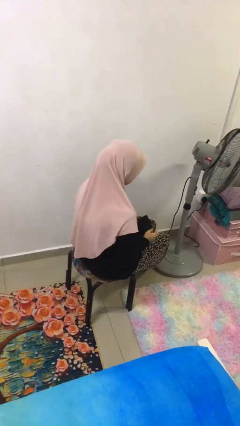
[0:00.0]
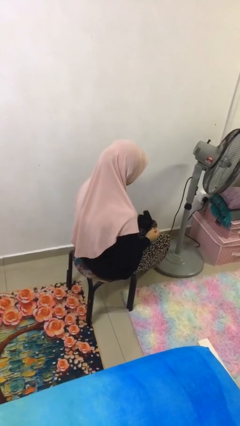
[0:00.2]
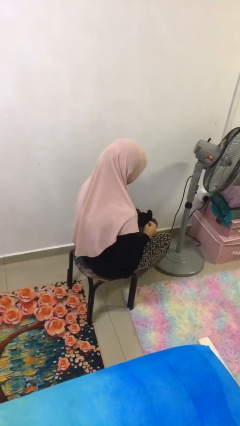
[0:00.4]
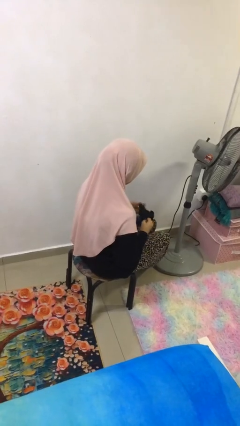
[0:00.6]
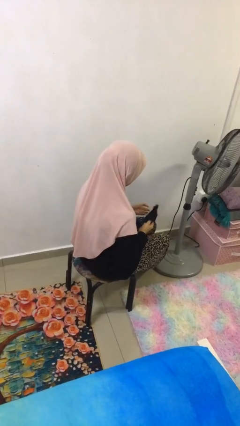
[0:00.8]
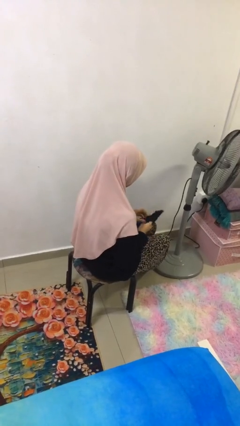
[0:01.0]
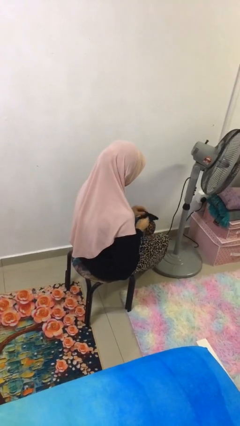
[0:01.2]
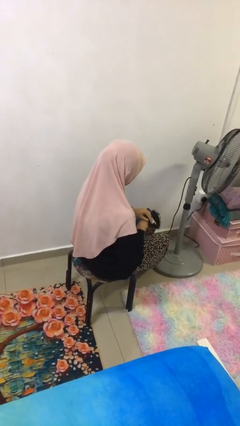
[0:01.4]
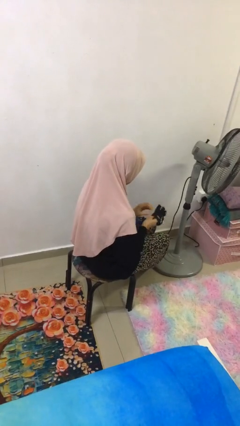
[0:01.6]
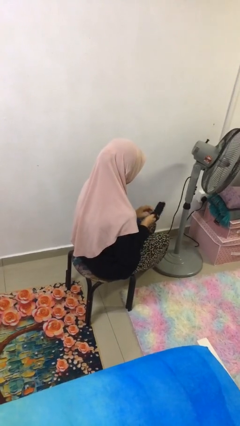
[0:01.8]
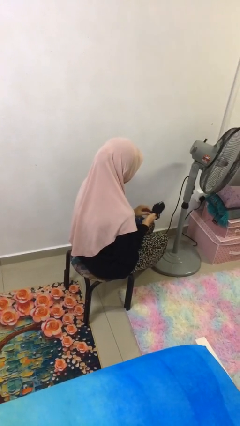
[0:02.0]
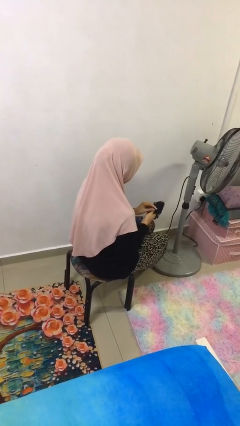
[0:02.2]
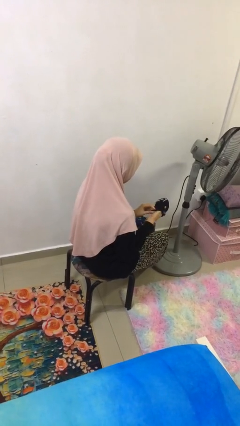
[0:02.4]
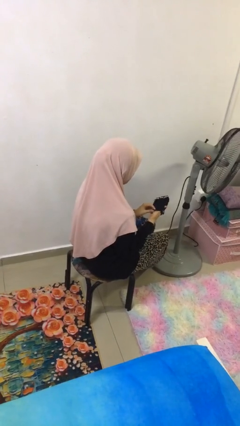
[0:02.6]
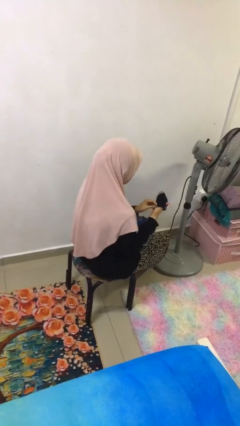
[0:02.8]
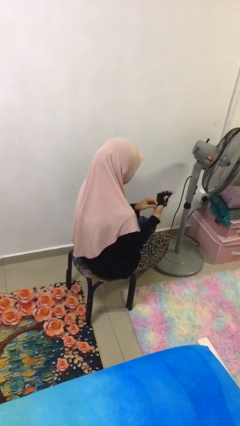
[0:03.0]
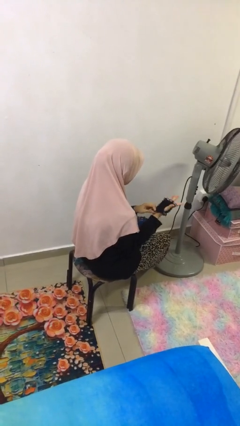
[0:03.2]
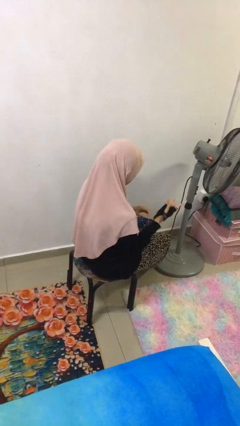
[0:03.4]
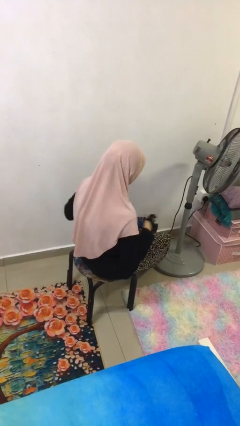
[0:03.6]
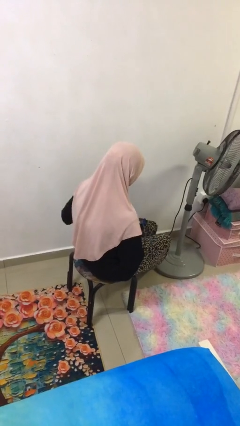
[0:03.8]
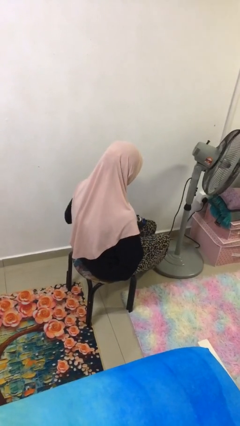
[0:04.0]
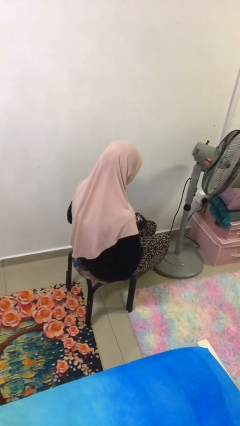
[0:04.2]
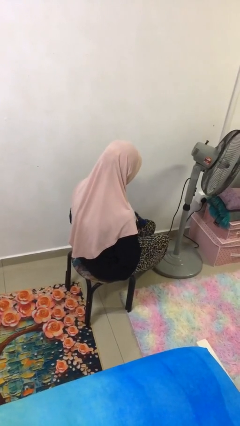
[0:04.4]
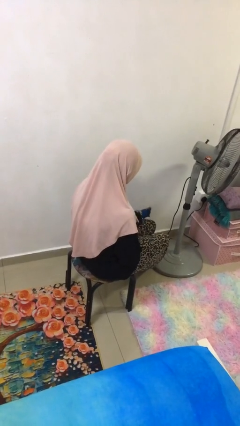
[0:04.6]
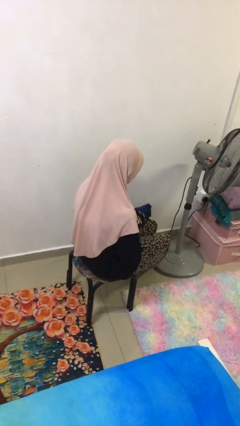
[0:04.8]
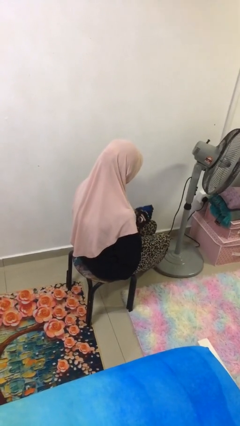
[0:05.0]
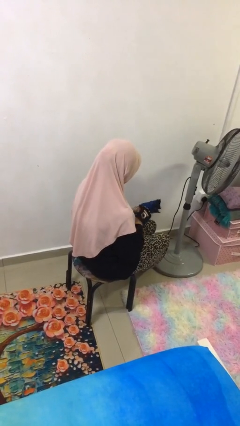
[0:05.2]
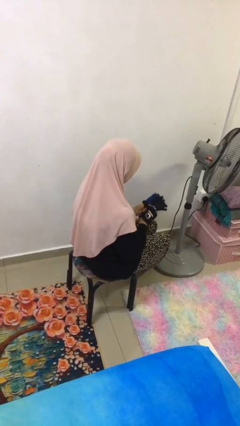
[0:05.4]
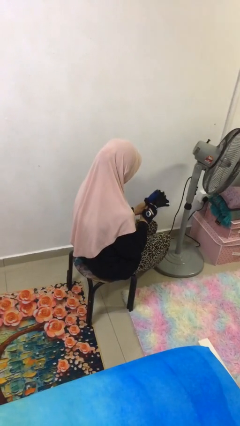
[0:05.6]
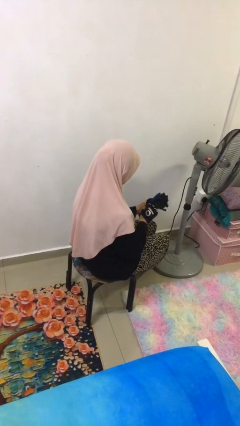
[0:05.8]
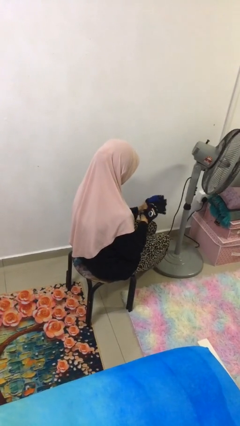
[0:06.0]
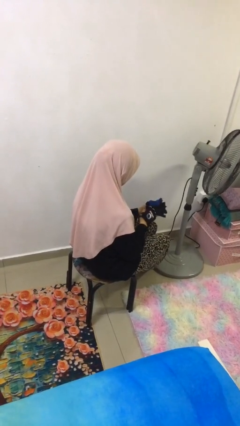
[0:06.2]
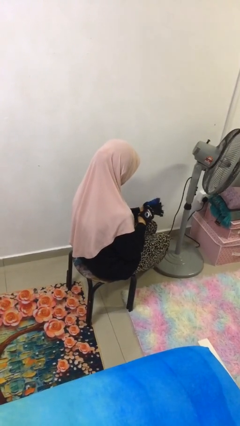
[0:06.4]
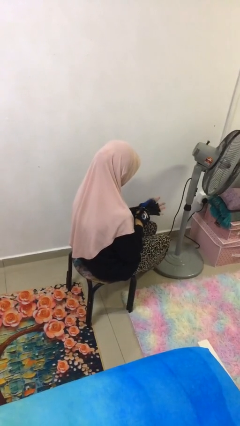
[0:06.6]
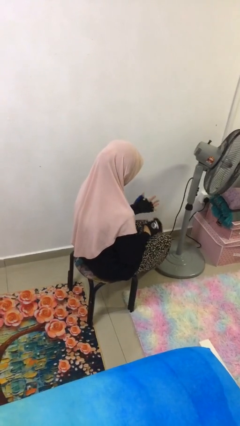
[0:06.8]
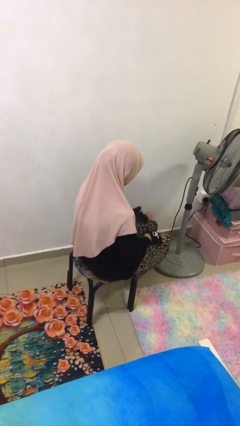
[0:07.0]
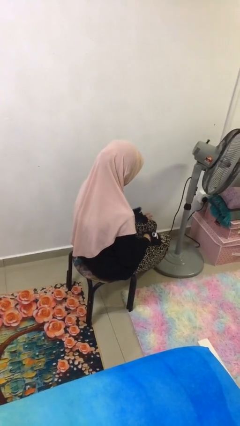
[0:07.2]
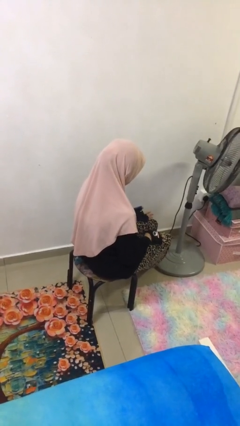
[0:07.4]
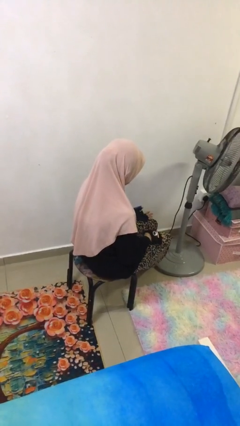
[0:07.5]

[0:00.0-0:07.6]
person puts on gloves

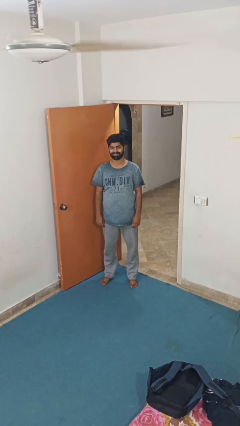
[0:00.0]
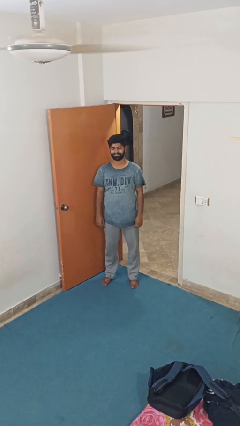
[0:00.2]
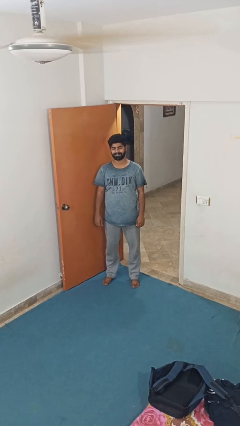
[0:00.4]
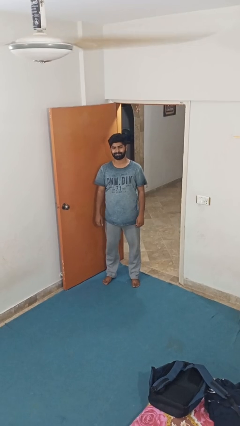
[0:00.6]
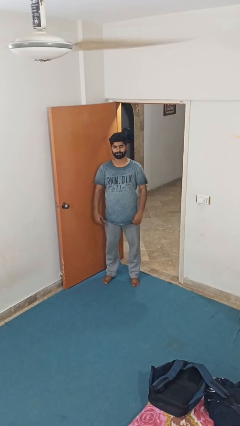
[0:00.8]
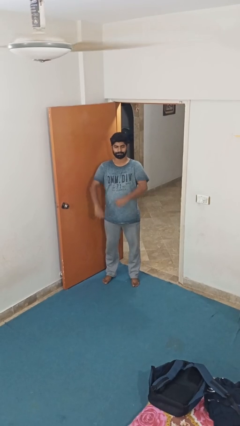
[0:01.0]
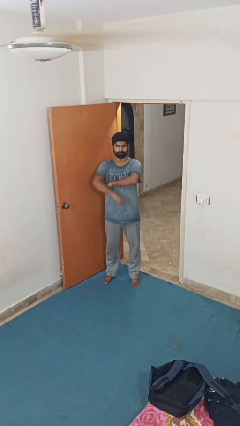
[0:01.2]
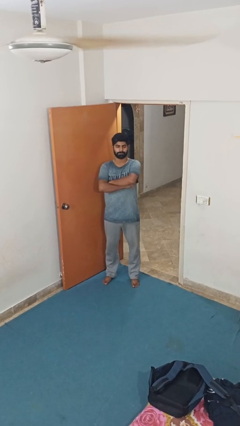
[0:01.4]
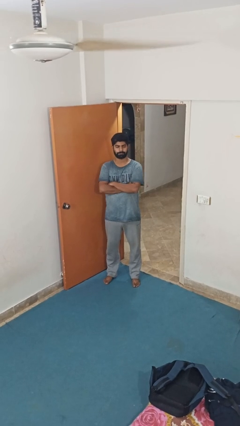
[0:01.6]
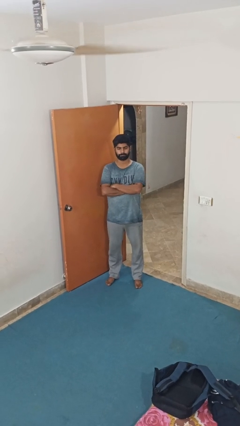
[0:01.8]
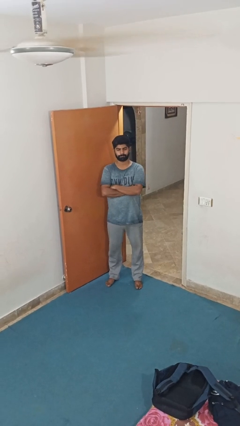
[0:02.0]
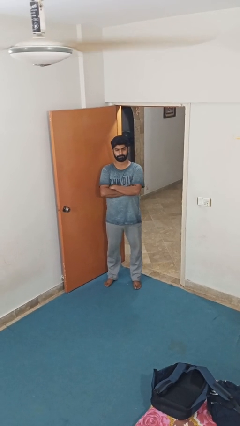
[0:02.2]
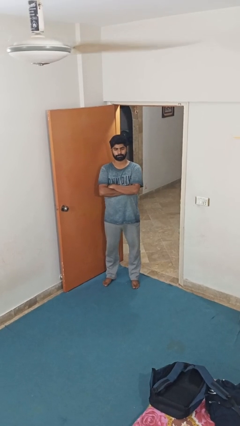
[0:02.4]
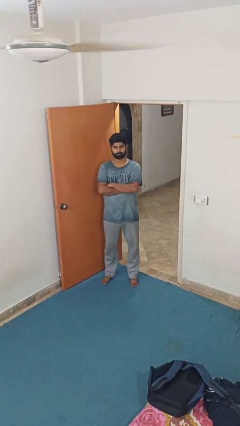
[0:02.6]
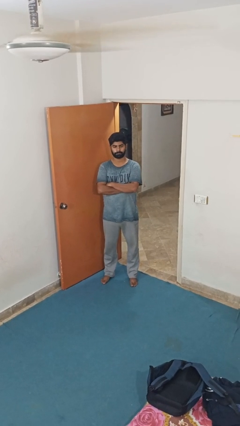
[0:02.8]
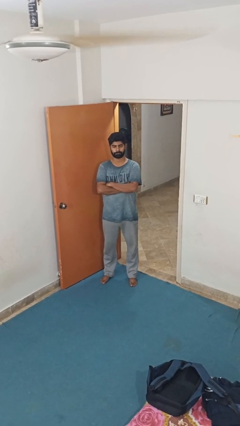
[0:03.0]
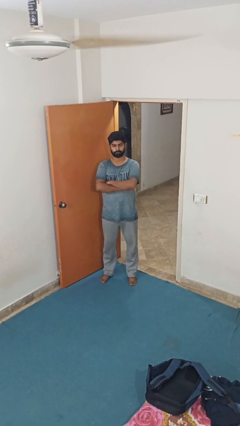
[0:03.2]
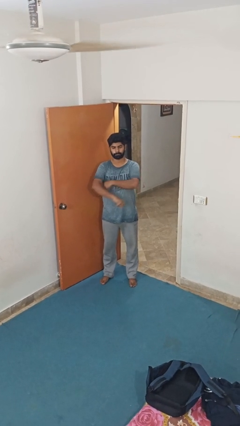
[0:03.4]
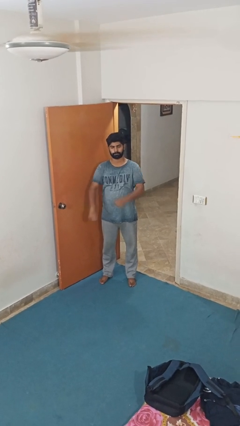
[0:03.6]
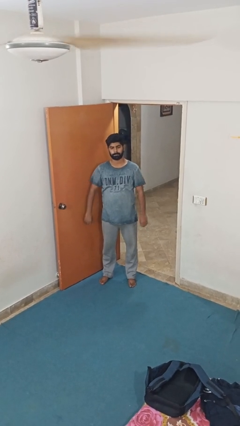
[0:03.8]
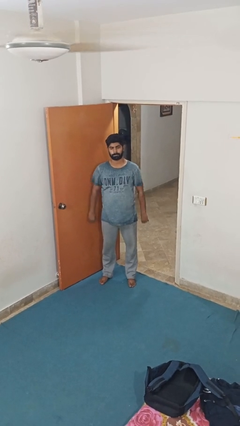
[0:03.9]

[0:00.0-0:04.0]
person crosses arms

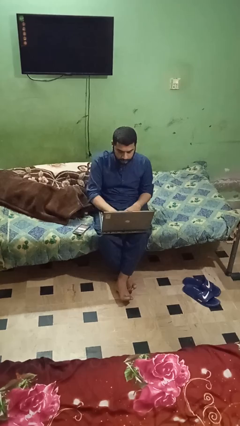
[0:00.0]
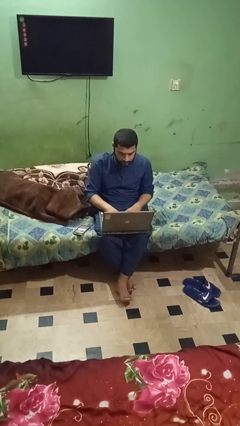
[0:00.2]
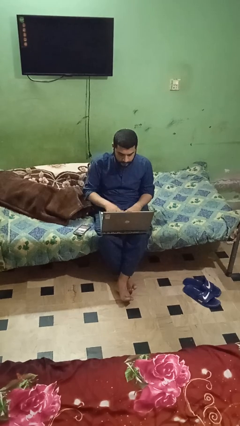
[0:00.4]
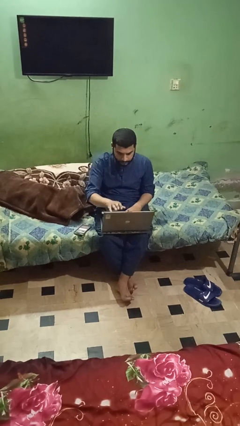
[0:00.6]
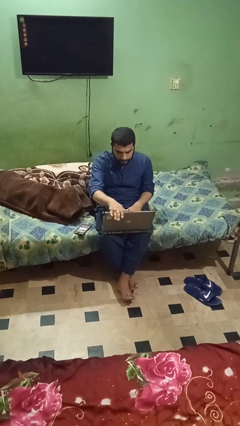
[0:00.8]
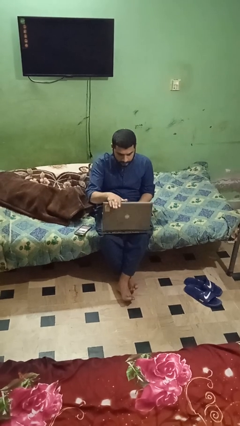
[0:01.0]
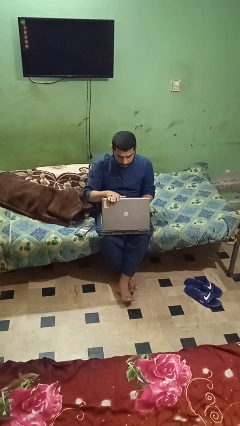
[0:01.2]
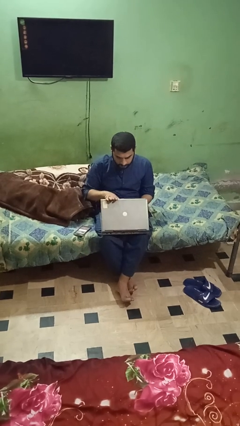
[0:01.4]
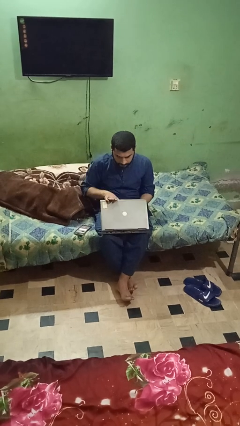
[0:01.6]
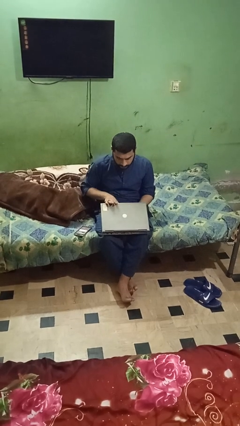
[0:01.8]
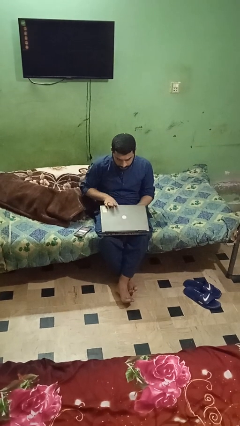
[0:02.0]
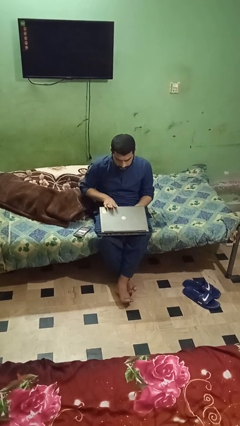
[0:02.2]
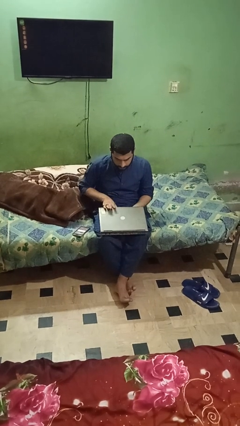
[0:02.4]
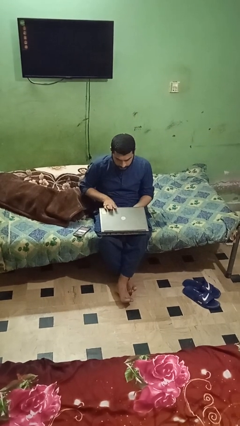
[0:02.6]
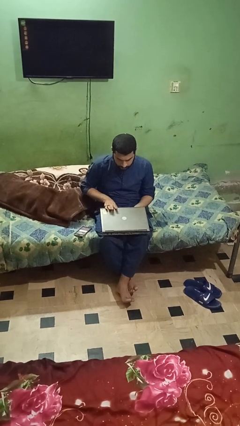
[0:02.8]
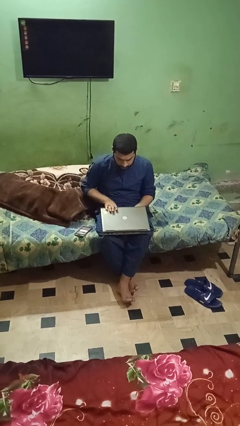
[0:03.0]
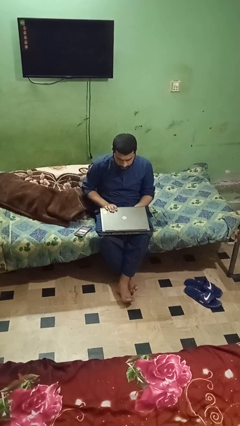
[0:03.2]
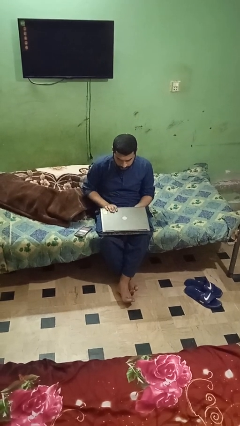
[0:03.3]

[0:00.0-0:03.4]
person closes laptop

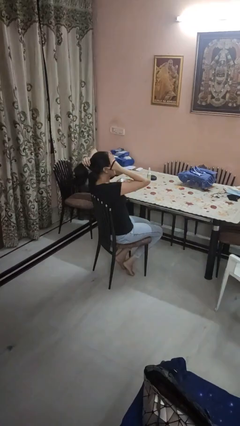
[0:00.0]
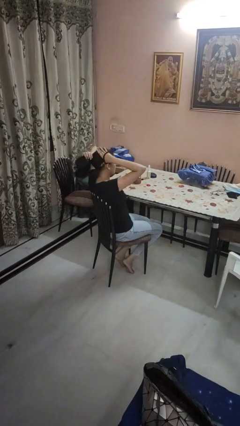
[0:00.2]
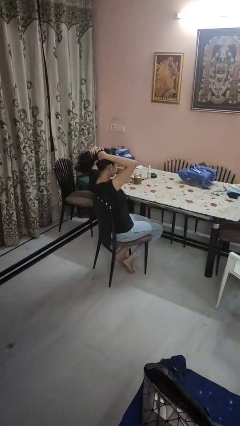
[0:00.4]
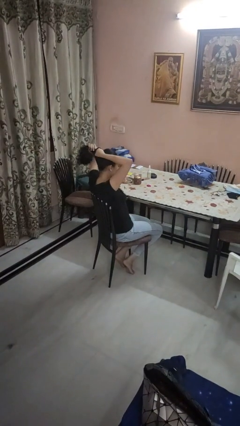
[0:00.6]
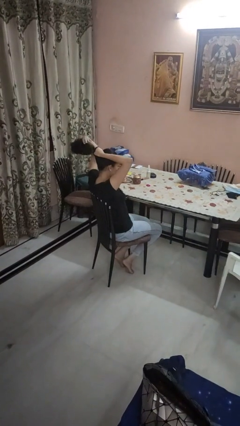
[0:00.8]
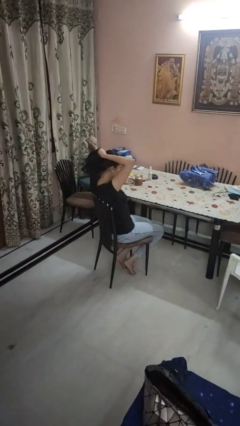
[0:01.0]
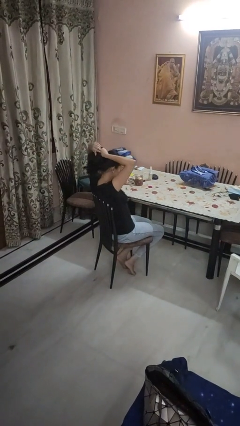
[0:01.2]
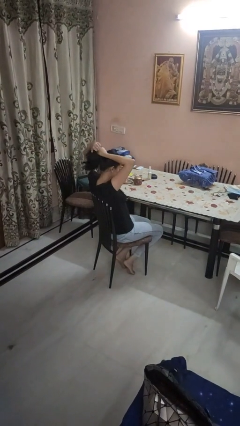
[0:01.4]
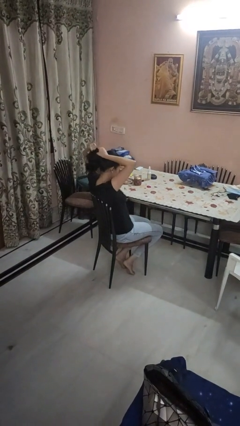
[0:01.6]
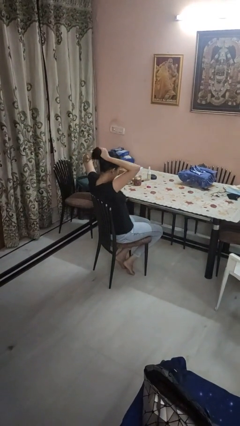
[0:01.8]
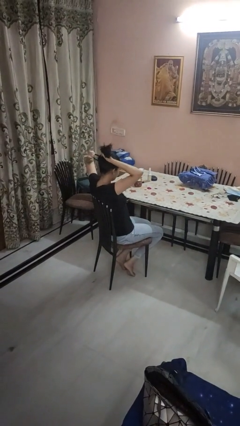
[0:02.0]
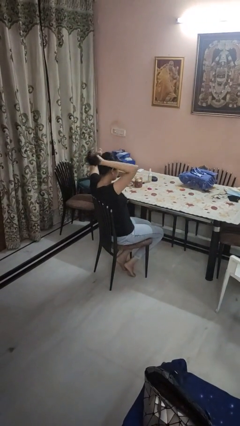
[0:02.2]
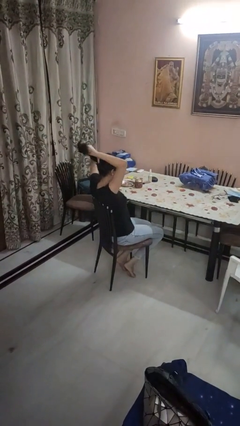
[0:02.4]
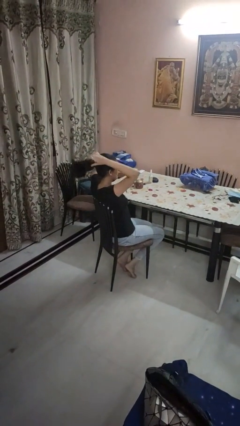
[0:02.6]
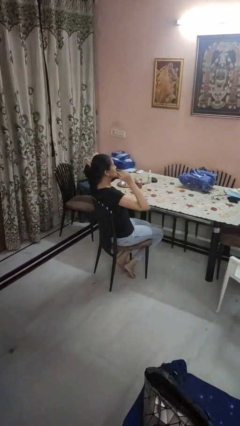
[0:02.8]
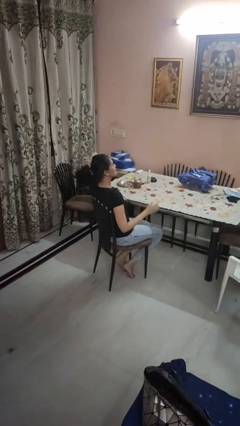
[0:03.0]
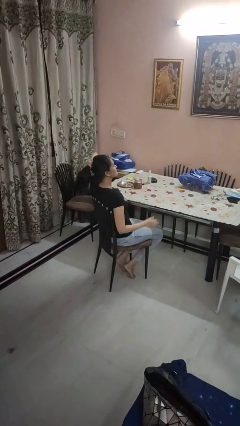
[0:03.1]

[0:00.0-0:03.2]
person puts hair in ponytail
